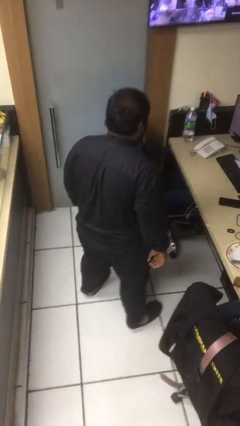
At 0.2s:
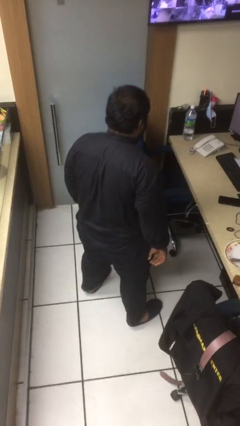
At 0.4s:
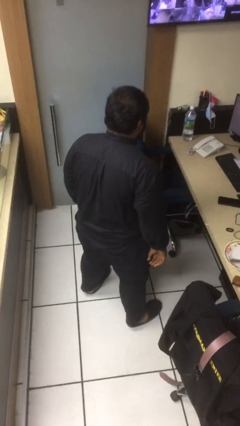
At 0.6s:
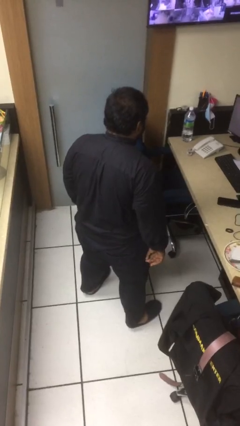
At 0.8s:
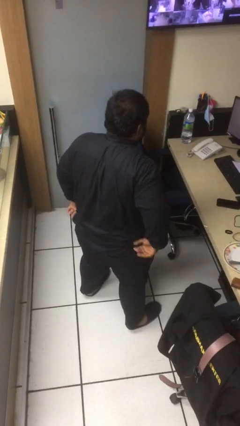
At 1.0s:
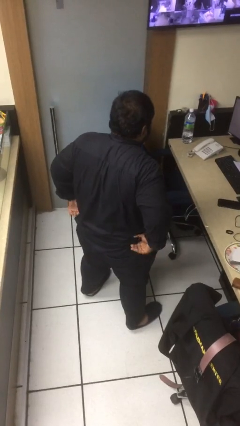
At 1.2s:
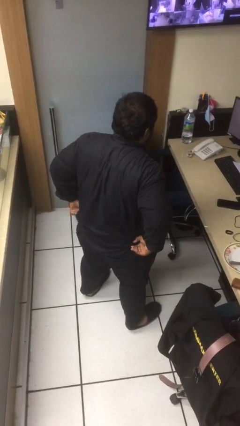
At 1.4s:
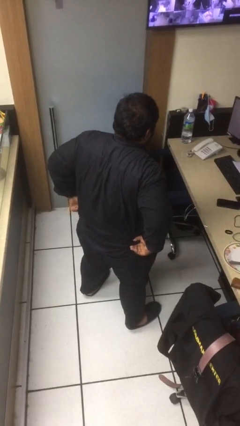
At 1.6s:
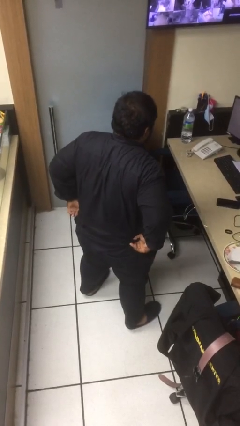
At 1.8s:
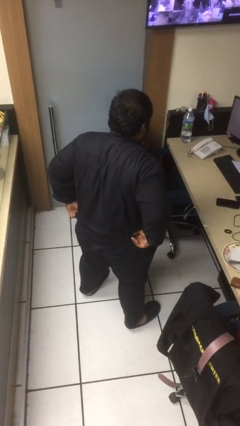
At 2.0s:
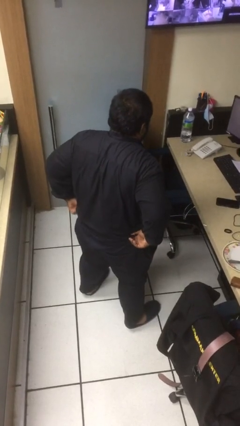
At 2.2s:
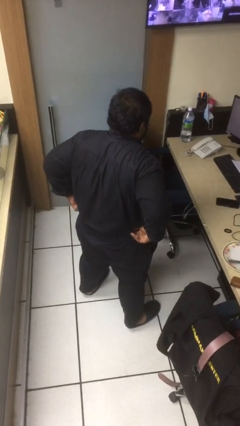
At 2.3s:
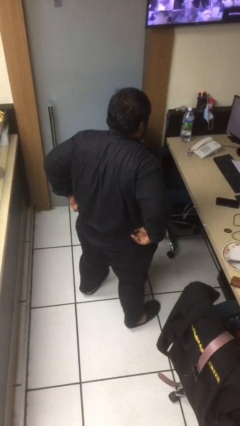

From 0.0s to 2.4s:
person hikes up pants

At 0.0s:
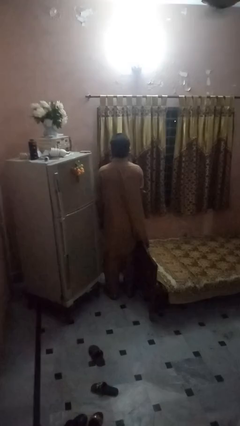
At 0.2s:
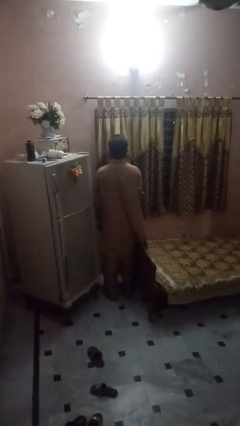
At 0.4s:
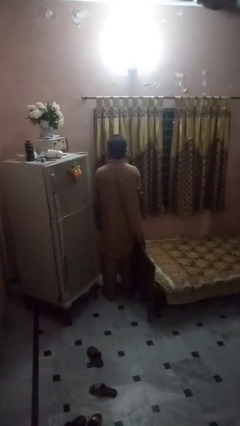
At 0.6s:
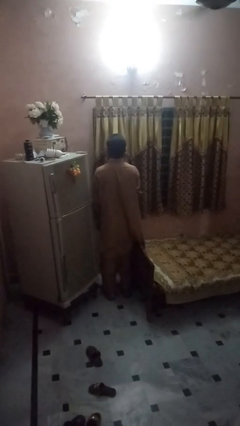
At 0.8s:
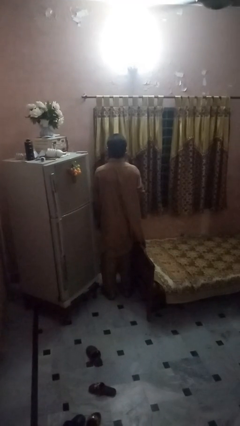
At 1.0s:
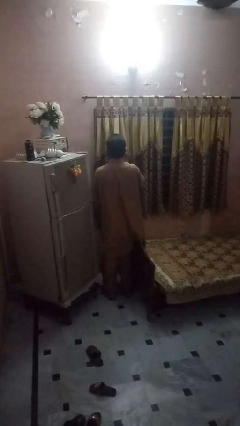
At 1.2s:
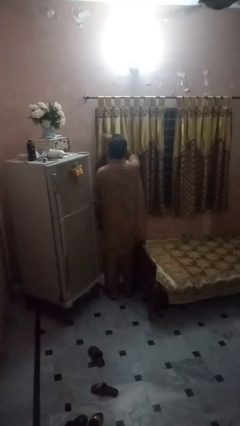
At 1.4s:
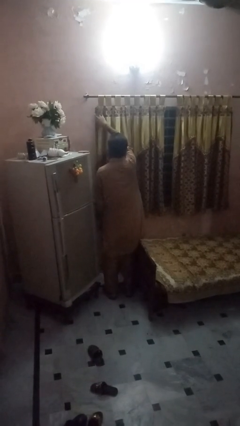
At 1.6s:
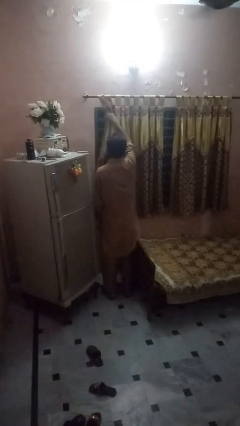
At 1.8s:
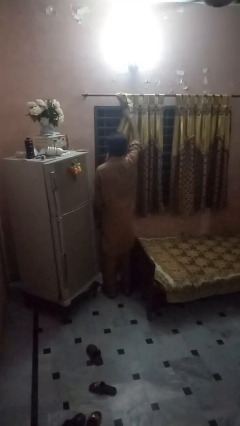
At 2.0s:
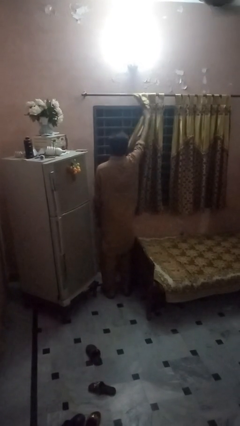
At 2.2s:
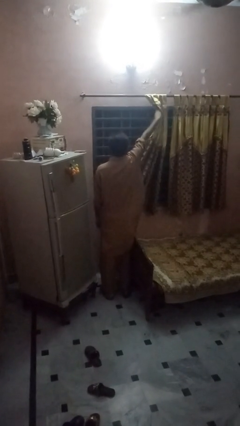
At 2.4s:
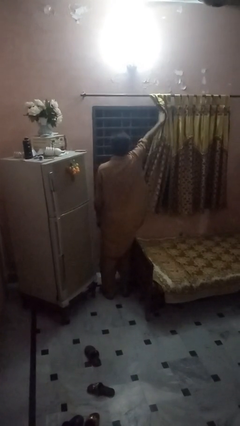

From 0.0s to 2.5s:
person opens curtains

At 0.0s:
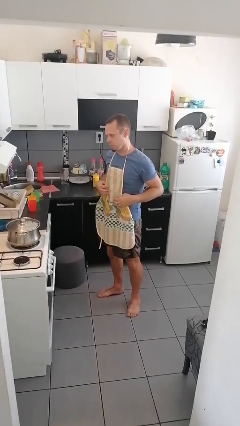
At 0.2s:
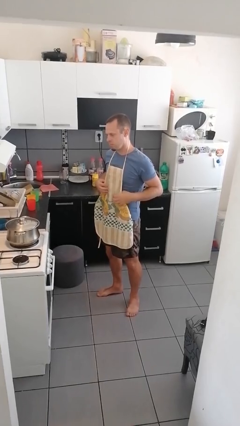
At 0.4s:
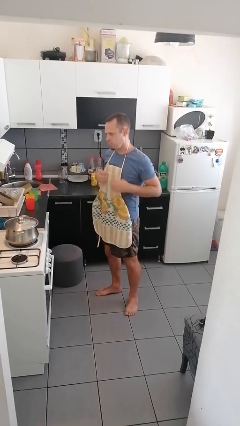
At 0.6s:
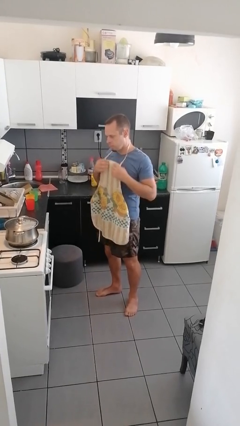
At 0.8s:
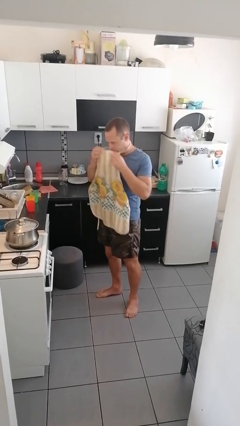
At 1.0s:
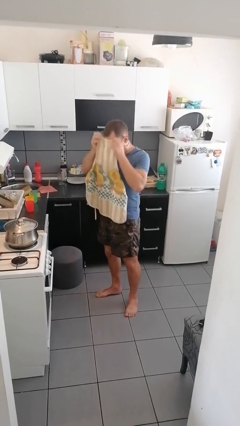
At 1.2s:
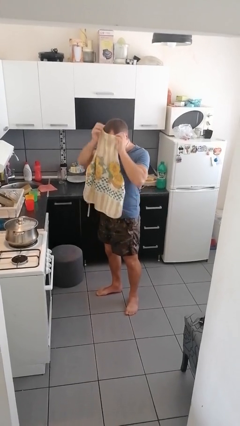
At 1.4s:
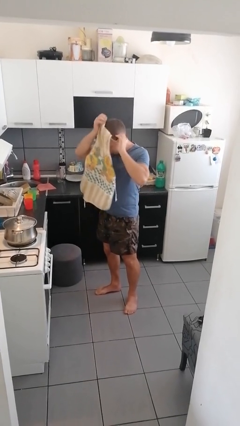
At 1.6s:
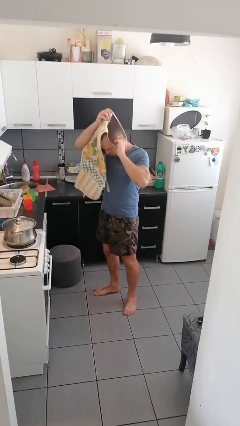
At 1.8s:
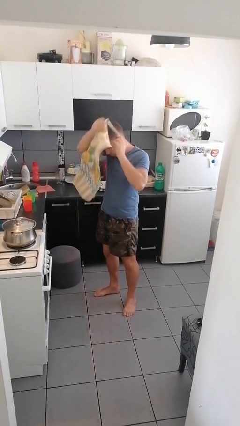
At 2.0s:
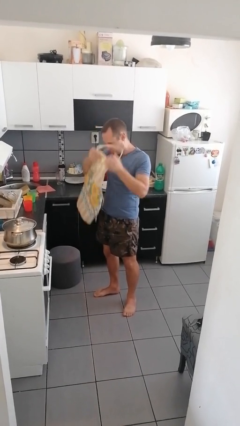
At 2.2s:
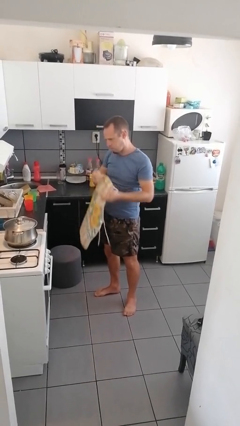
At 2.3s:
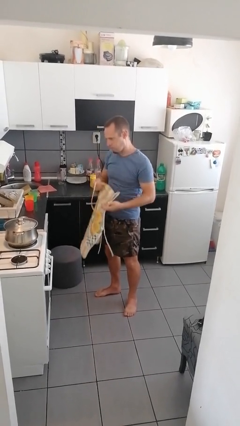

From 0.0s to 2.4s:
person takes off apron

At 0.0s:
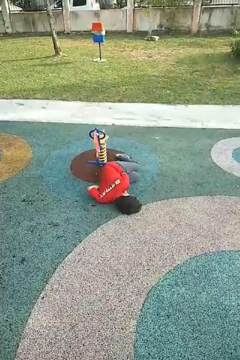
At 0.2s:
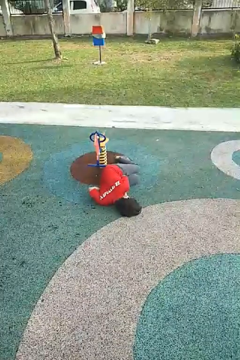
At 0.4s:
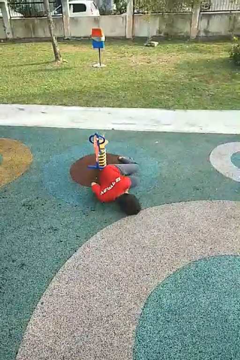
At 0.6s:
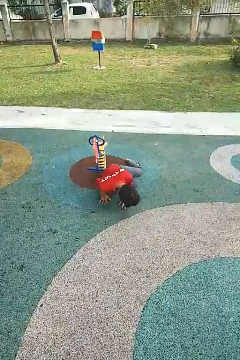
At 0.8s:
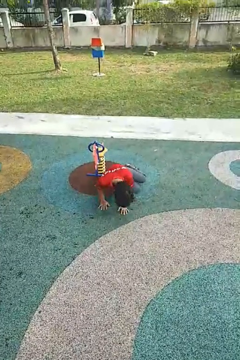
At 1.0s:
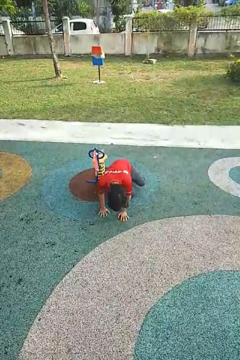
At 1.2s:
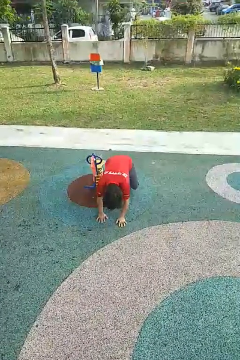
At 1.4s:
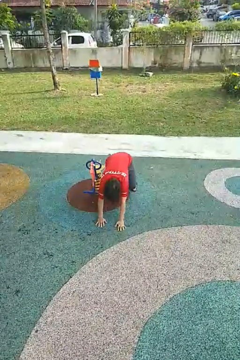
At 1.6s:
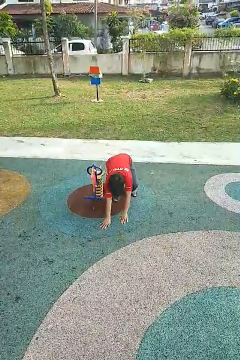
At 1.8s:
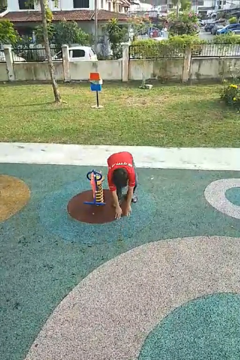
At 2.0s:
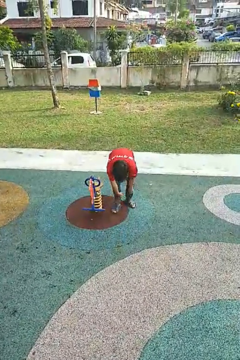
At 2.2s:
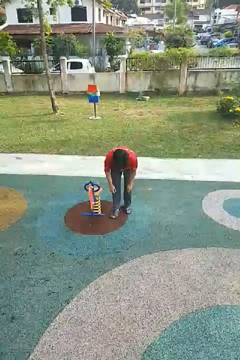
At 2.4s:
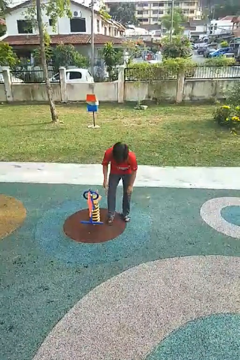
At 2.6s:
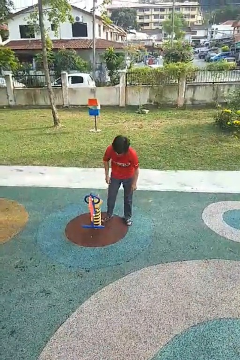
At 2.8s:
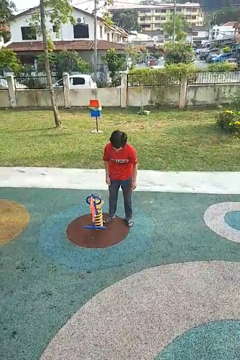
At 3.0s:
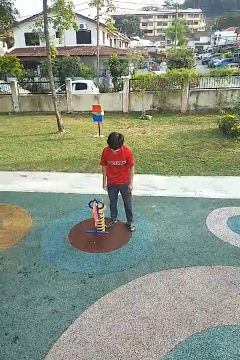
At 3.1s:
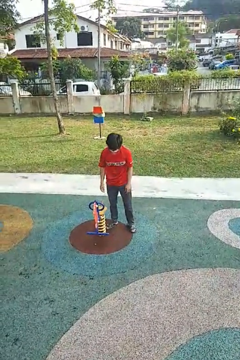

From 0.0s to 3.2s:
person stands up from floor

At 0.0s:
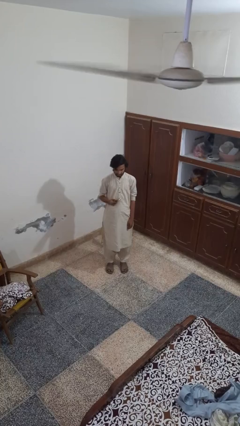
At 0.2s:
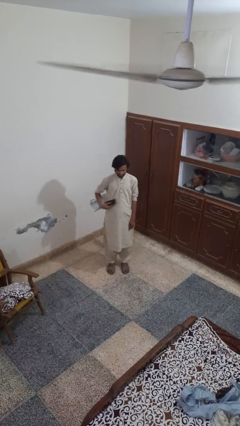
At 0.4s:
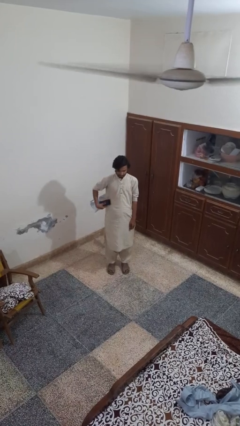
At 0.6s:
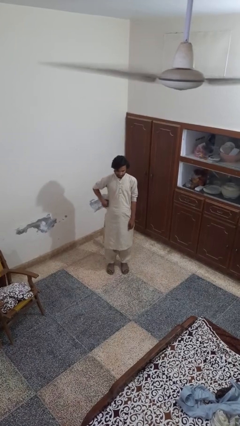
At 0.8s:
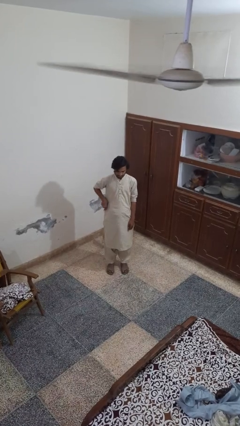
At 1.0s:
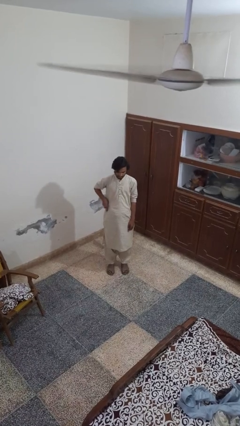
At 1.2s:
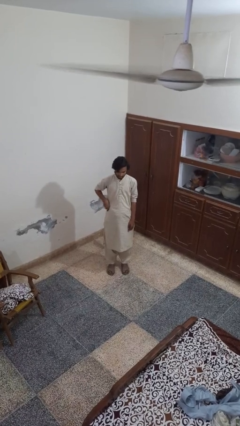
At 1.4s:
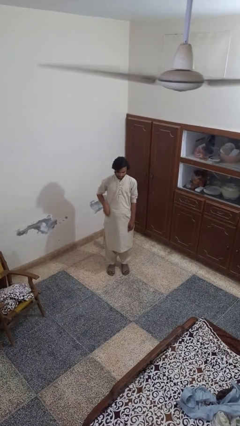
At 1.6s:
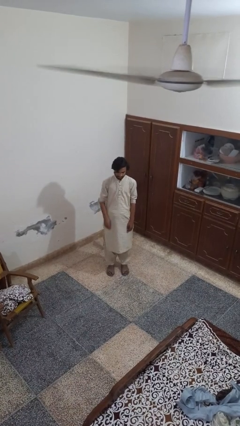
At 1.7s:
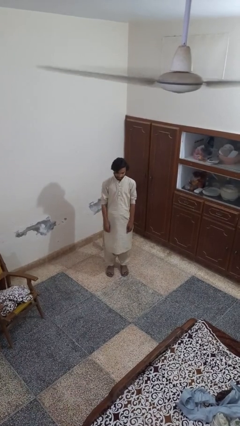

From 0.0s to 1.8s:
person puts phone into pocket

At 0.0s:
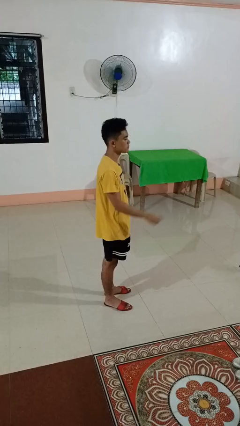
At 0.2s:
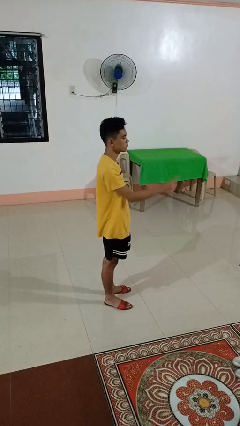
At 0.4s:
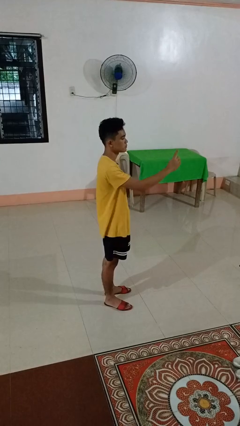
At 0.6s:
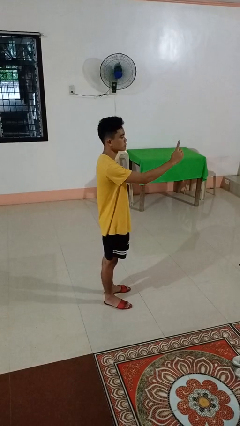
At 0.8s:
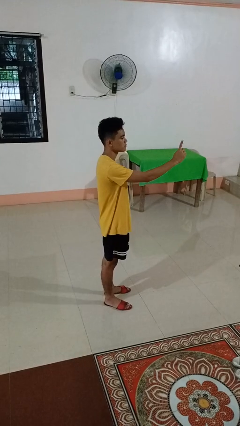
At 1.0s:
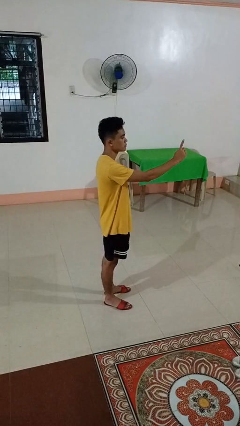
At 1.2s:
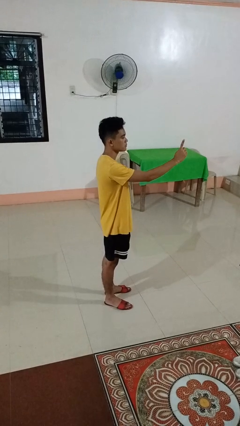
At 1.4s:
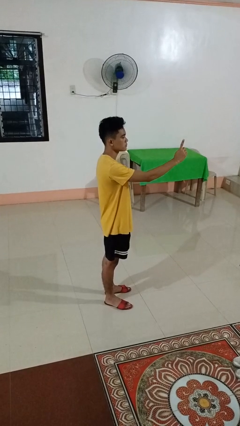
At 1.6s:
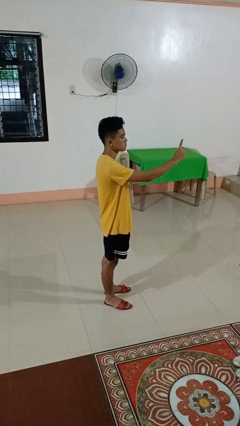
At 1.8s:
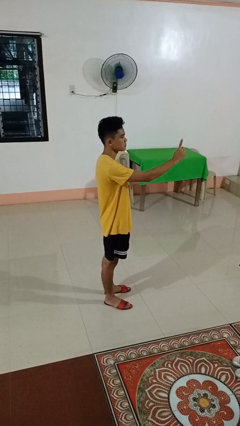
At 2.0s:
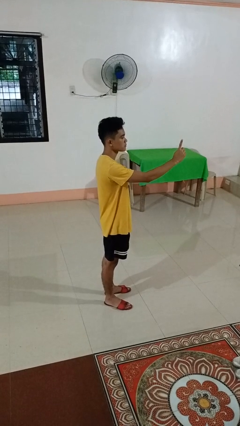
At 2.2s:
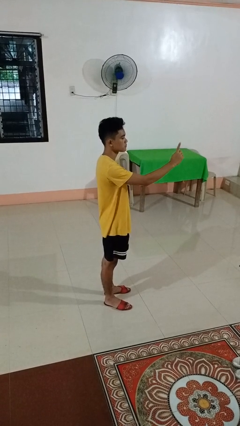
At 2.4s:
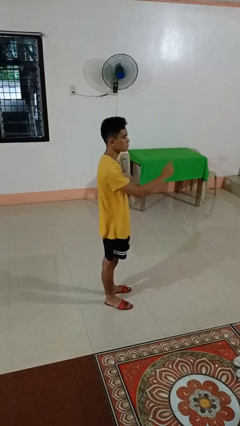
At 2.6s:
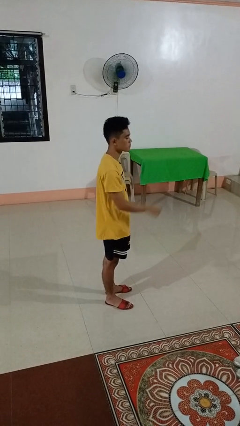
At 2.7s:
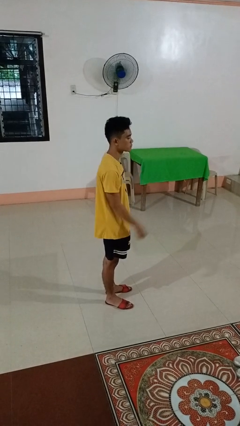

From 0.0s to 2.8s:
person gestures number one

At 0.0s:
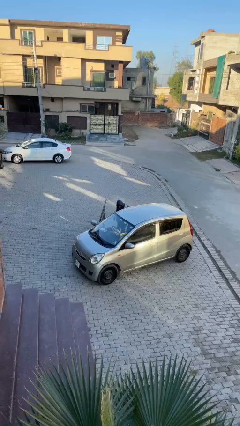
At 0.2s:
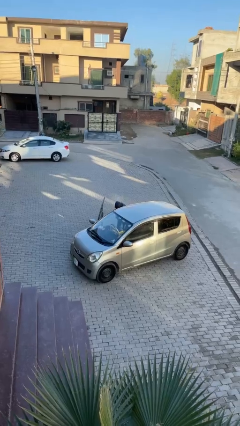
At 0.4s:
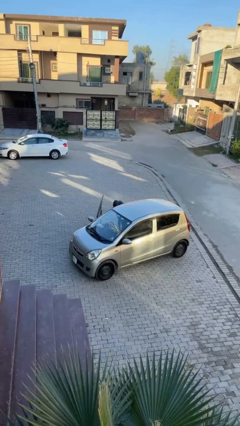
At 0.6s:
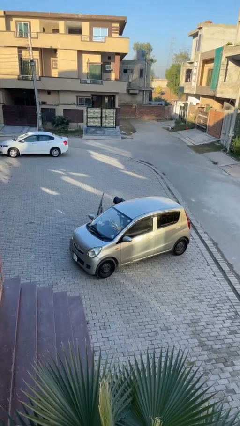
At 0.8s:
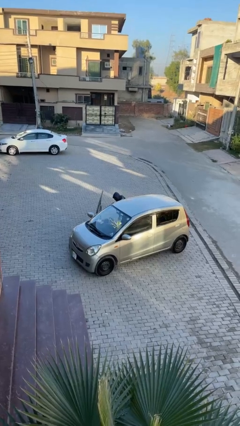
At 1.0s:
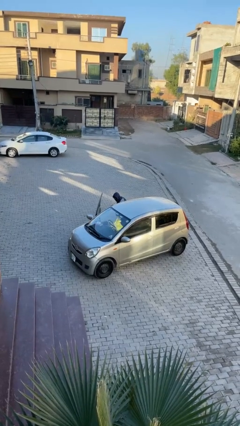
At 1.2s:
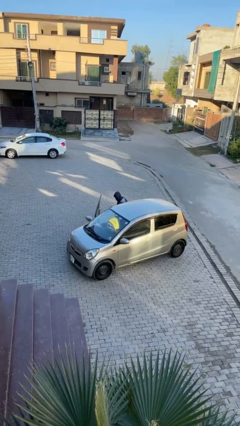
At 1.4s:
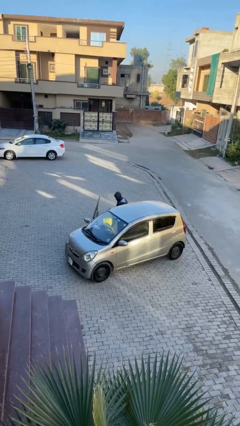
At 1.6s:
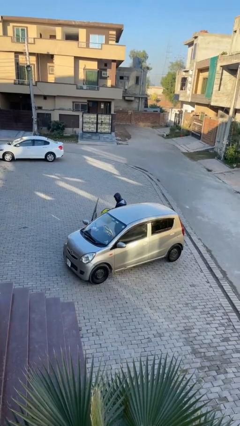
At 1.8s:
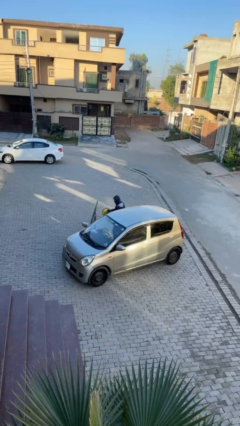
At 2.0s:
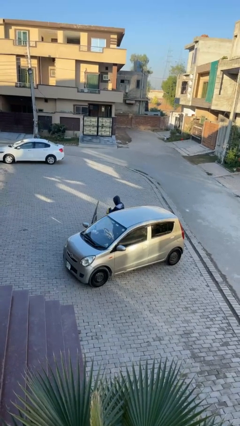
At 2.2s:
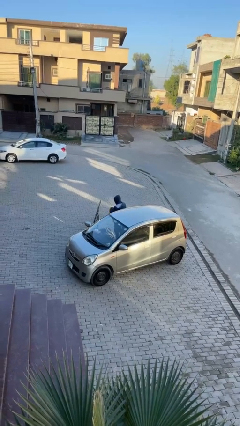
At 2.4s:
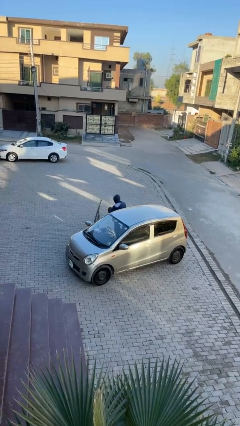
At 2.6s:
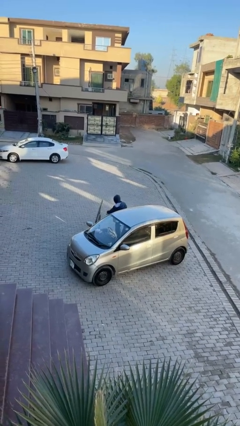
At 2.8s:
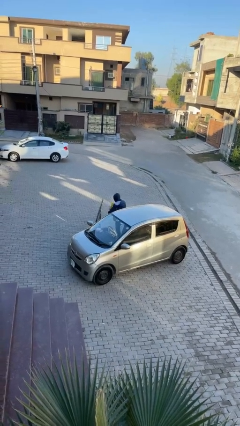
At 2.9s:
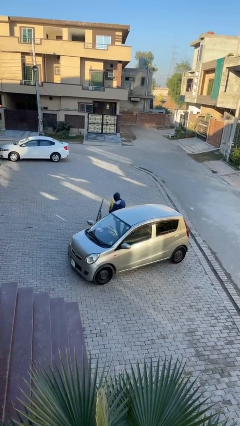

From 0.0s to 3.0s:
person unloads car
